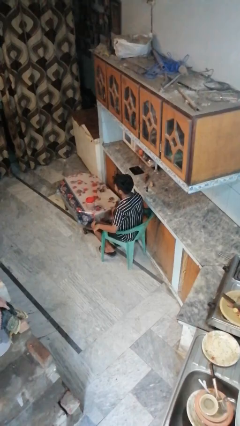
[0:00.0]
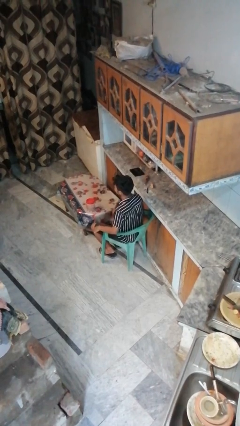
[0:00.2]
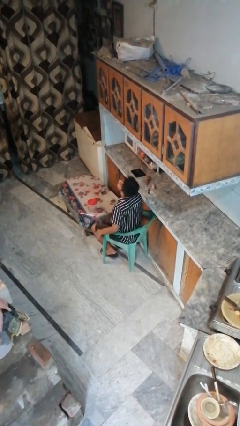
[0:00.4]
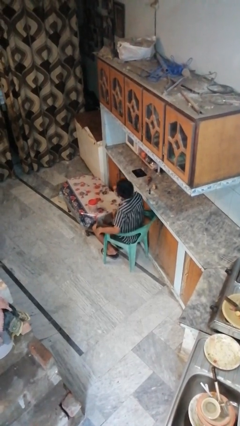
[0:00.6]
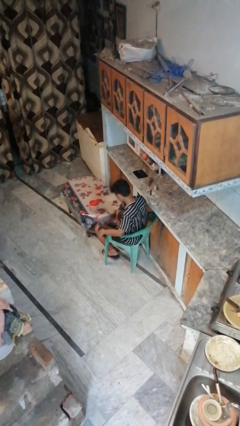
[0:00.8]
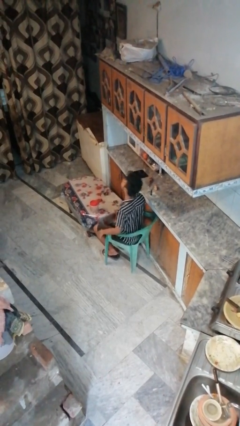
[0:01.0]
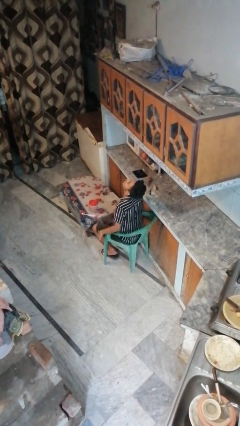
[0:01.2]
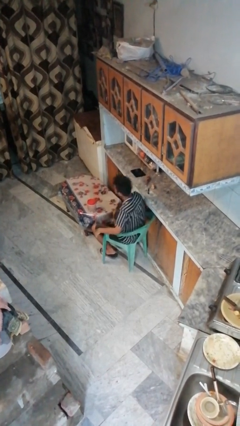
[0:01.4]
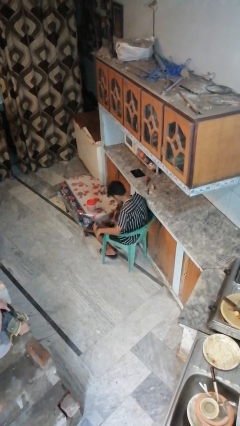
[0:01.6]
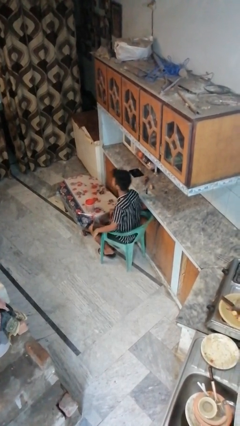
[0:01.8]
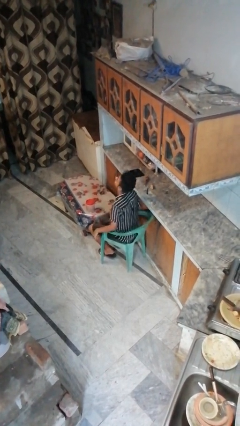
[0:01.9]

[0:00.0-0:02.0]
person nods head

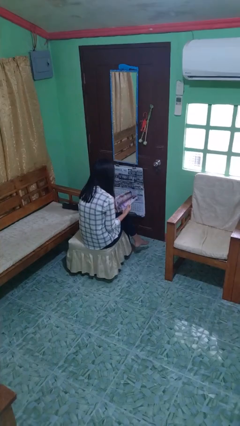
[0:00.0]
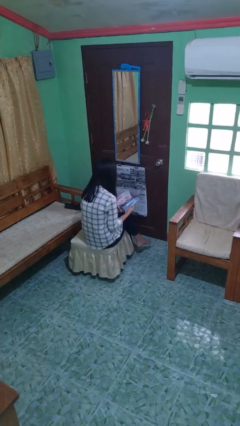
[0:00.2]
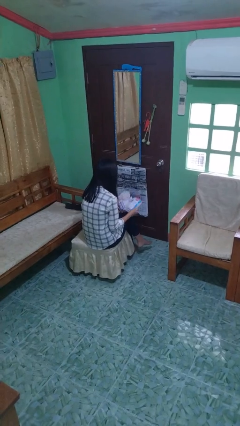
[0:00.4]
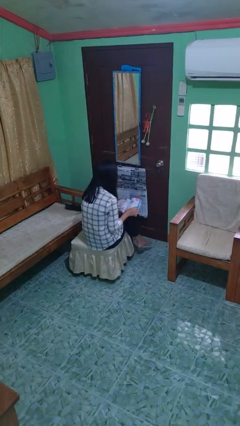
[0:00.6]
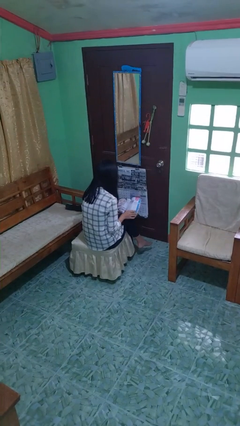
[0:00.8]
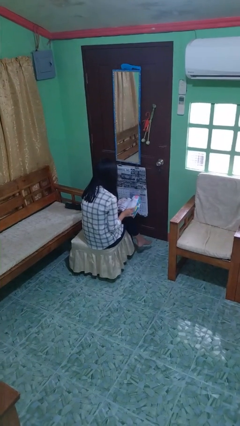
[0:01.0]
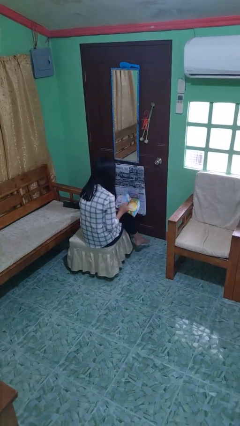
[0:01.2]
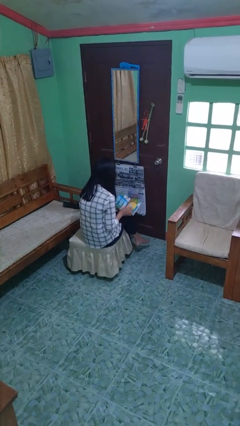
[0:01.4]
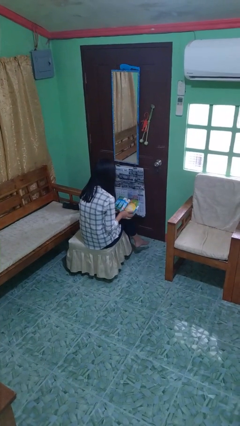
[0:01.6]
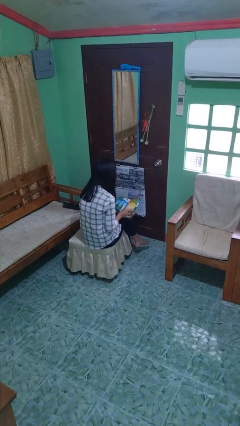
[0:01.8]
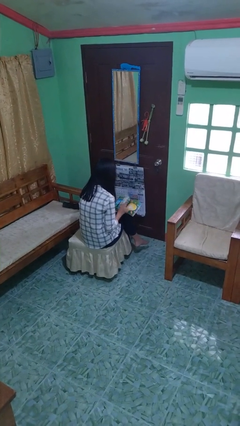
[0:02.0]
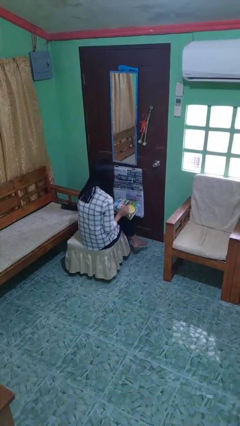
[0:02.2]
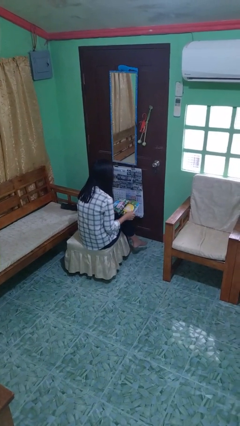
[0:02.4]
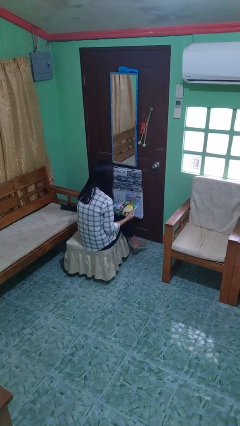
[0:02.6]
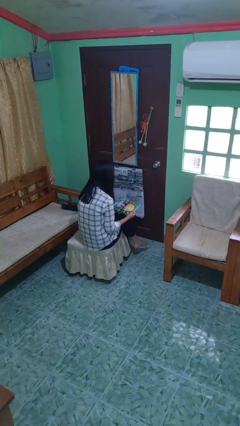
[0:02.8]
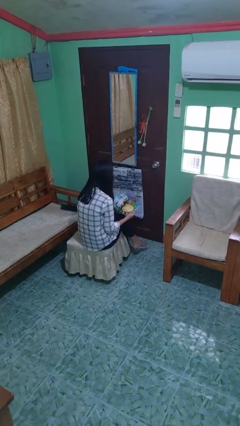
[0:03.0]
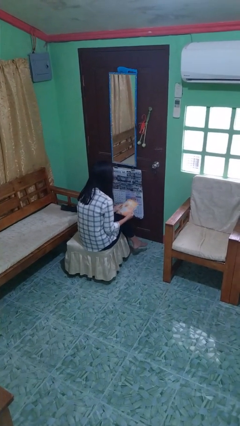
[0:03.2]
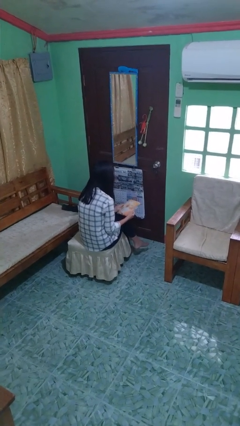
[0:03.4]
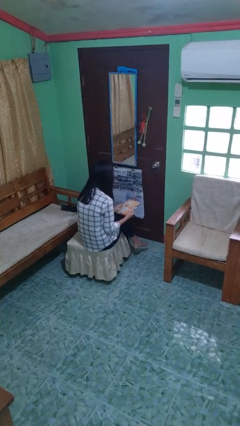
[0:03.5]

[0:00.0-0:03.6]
person reads magazine

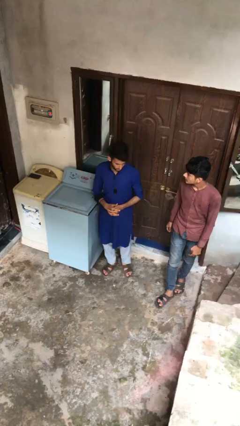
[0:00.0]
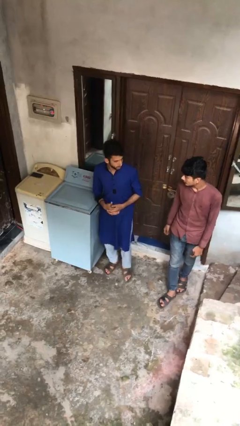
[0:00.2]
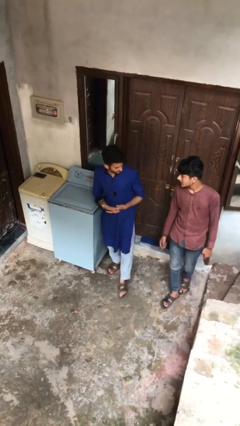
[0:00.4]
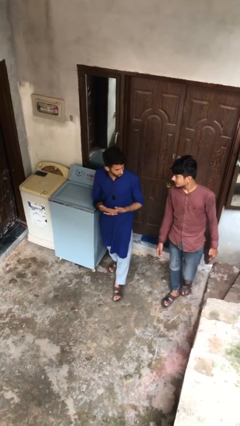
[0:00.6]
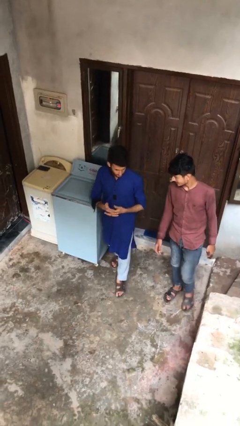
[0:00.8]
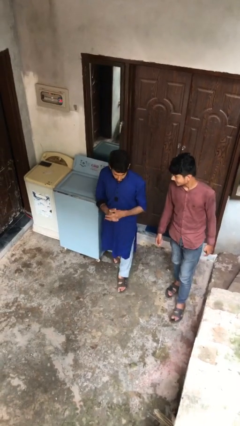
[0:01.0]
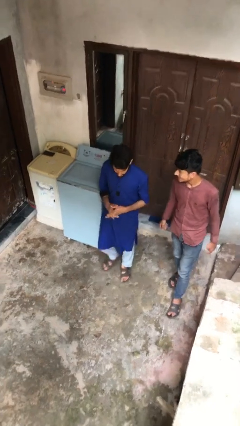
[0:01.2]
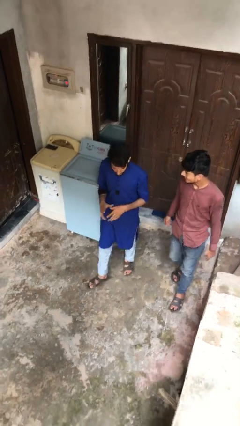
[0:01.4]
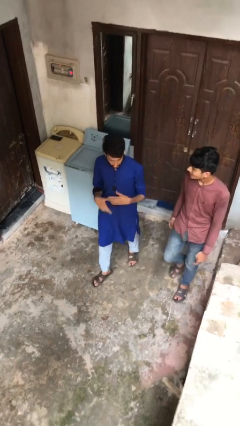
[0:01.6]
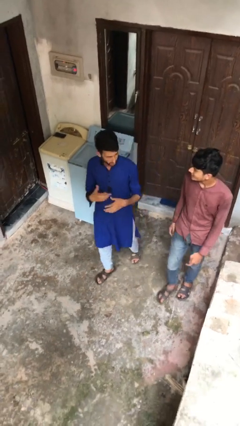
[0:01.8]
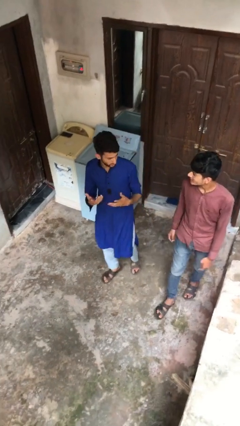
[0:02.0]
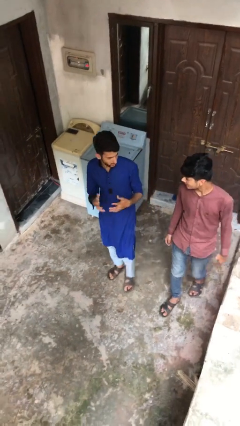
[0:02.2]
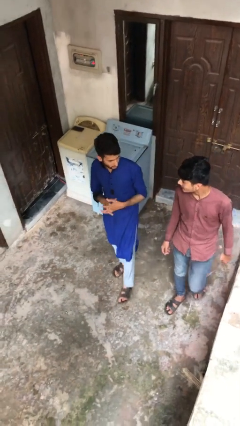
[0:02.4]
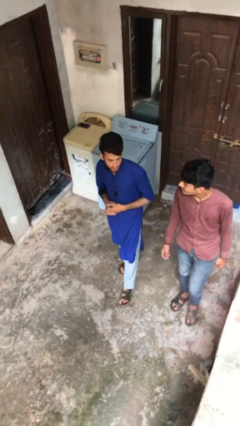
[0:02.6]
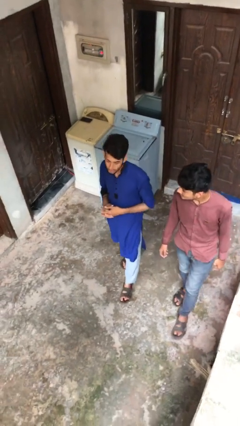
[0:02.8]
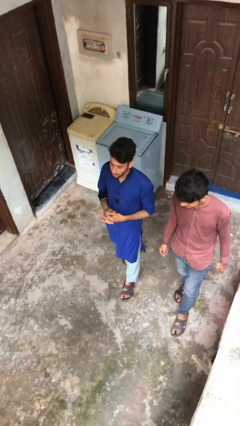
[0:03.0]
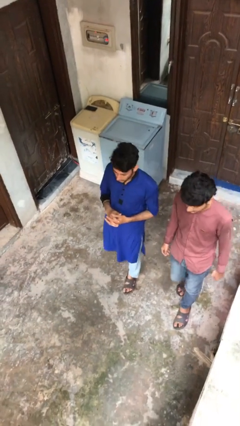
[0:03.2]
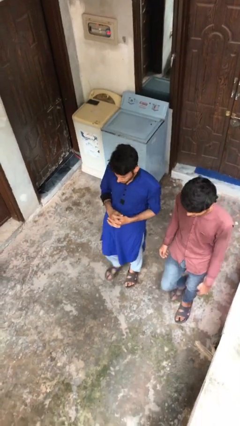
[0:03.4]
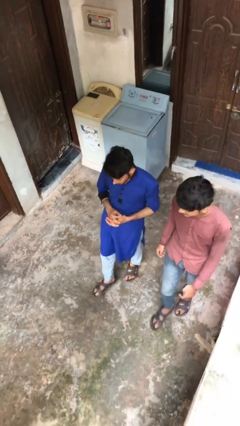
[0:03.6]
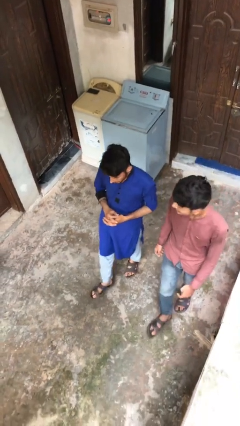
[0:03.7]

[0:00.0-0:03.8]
person talks to person

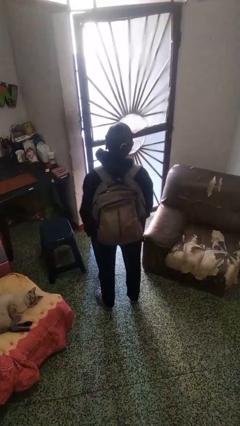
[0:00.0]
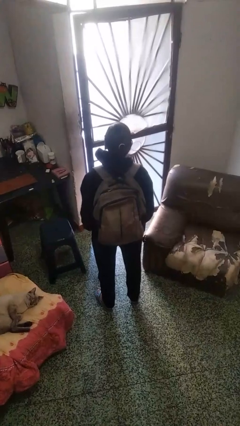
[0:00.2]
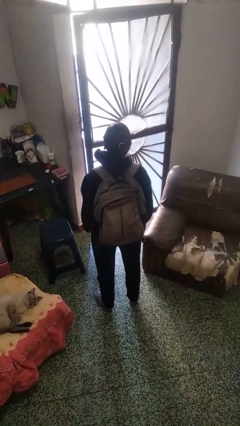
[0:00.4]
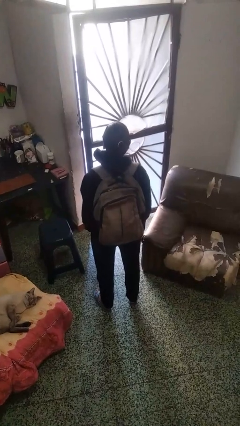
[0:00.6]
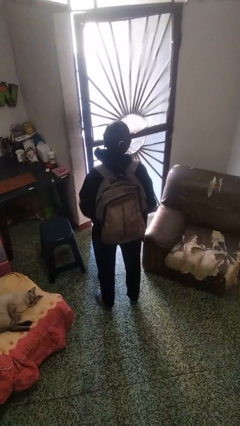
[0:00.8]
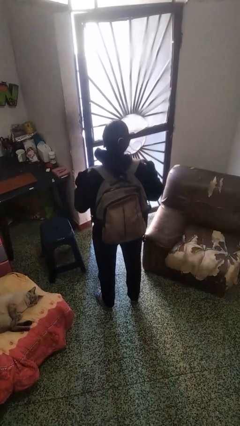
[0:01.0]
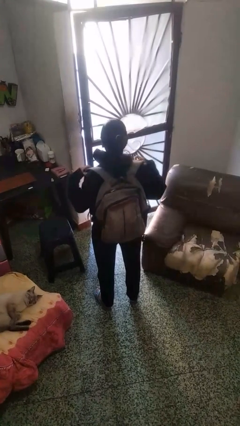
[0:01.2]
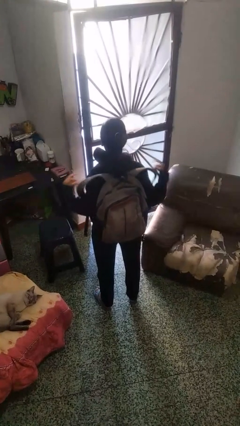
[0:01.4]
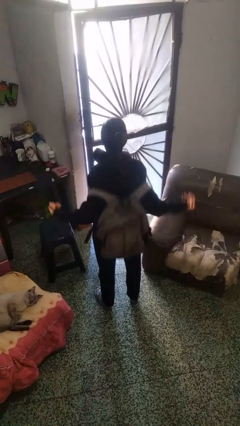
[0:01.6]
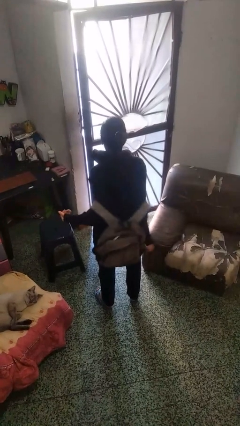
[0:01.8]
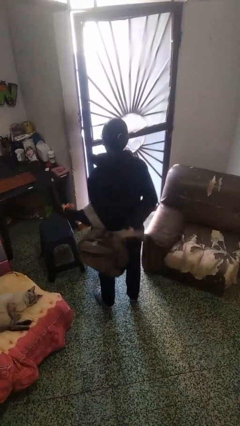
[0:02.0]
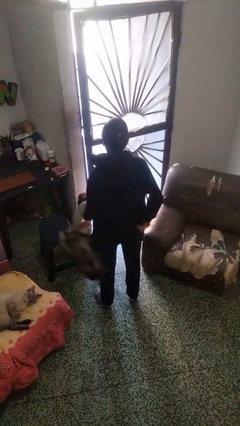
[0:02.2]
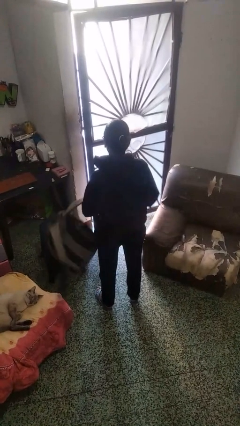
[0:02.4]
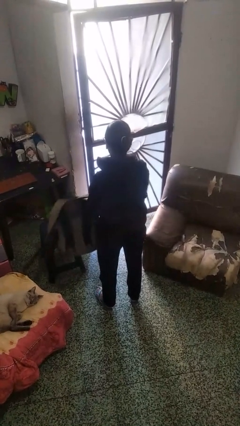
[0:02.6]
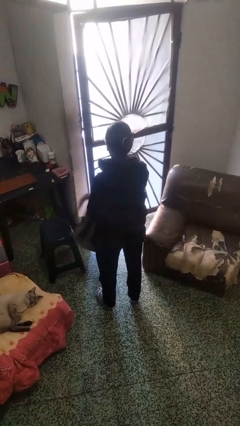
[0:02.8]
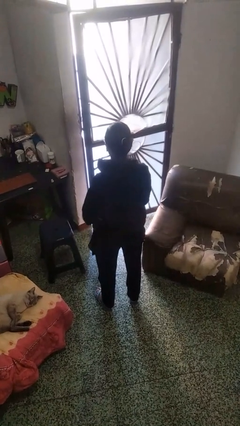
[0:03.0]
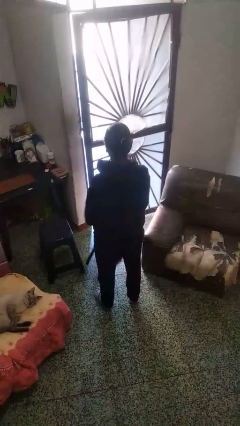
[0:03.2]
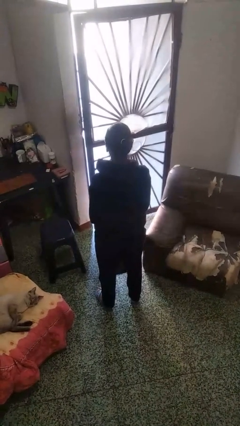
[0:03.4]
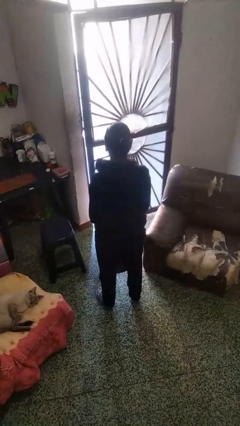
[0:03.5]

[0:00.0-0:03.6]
person takes off backpack

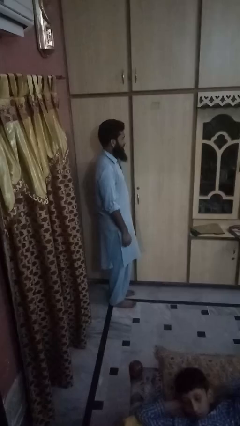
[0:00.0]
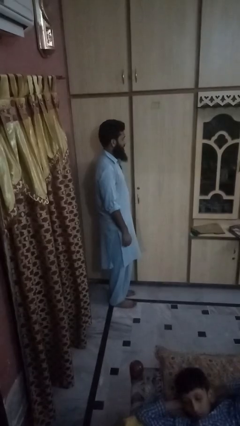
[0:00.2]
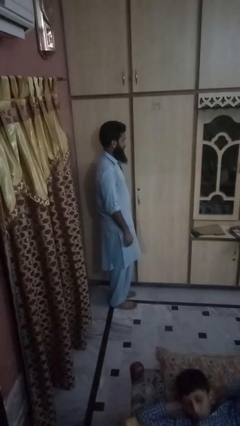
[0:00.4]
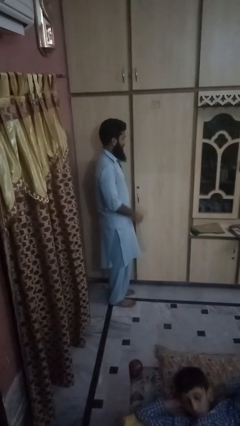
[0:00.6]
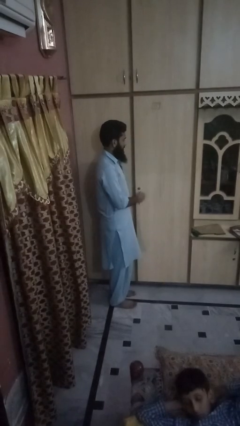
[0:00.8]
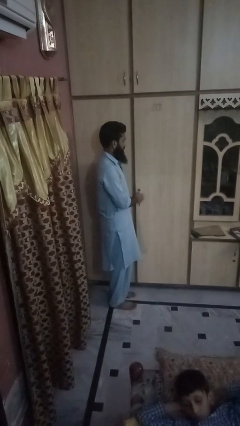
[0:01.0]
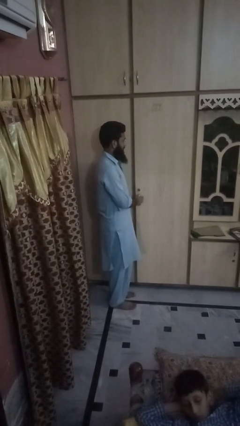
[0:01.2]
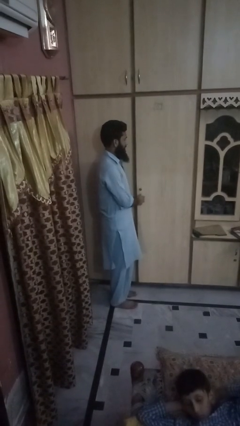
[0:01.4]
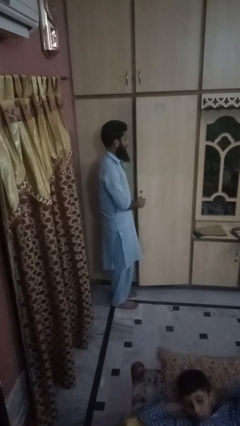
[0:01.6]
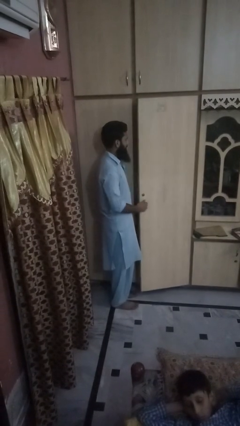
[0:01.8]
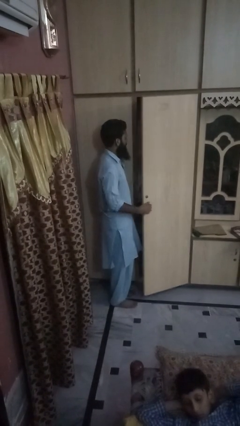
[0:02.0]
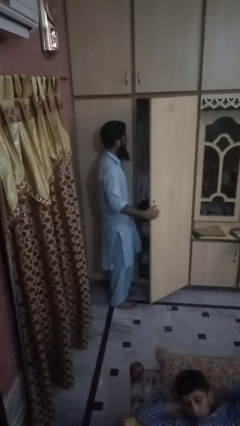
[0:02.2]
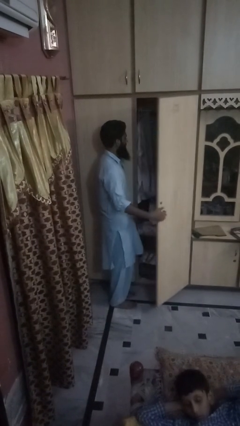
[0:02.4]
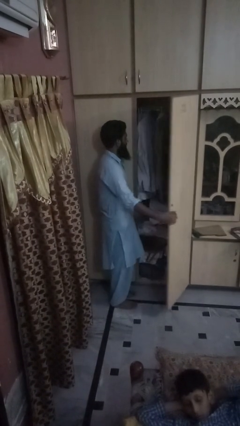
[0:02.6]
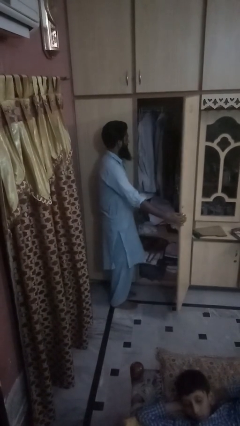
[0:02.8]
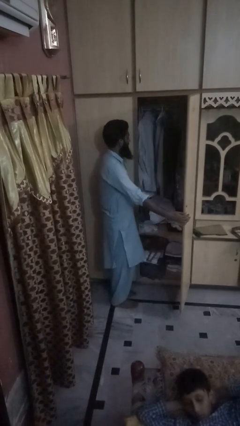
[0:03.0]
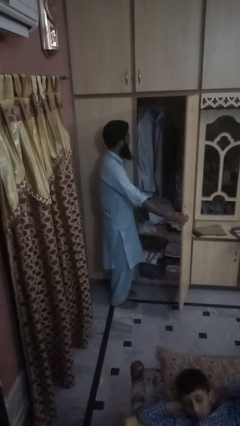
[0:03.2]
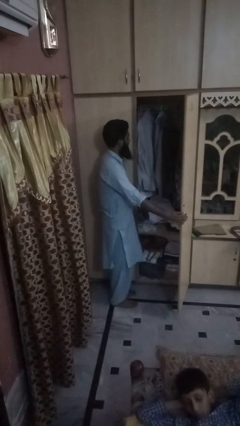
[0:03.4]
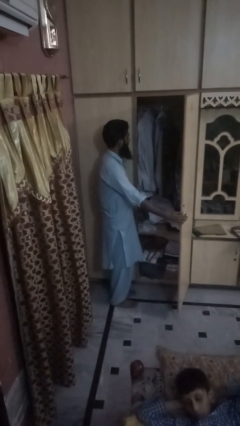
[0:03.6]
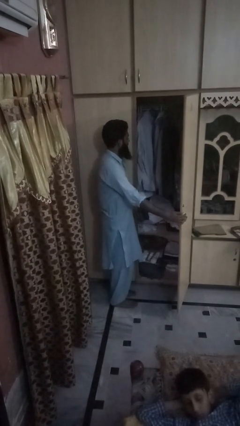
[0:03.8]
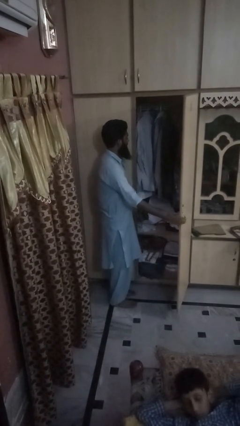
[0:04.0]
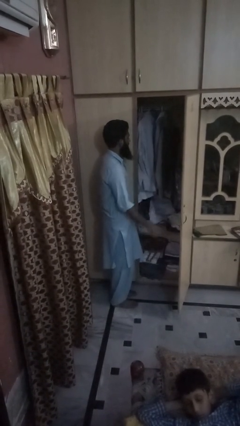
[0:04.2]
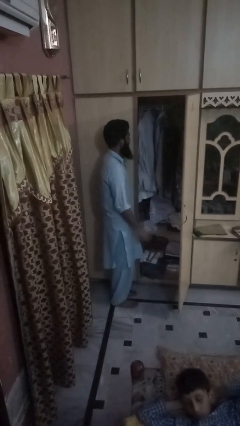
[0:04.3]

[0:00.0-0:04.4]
person opens dresser drawer
